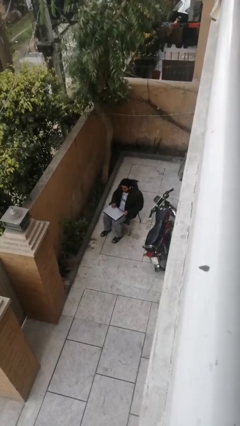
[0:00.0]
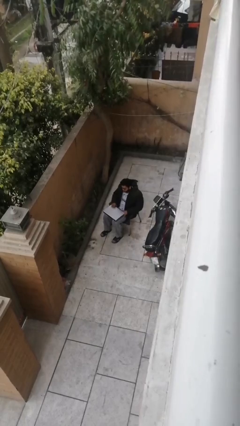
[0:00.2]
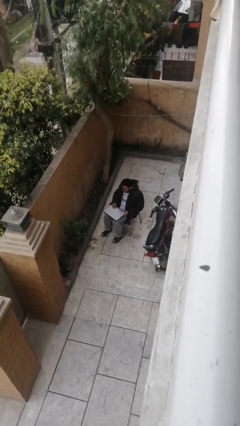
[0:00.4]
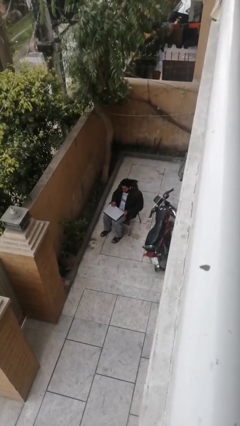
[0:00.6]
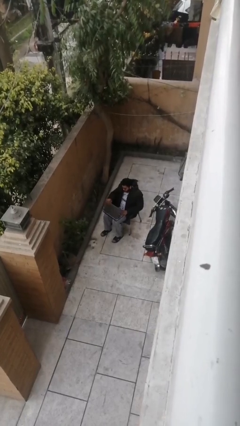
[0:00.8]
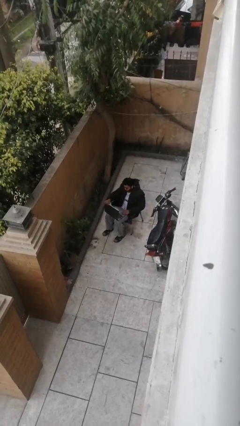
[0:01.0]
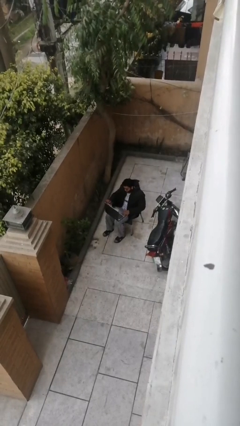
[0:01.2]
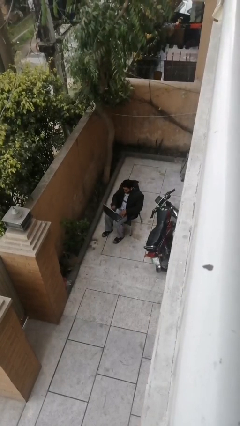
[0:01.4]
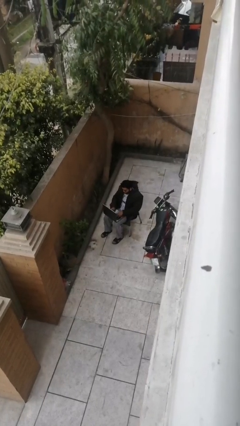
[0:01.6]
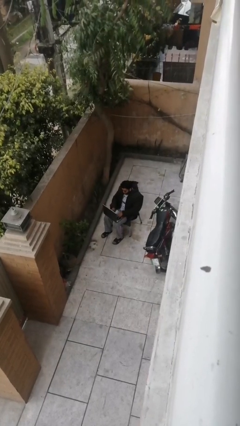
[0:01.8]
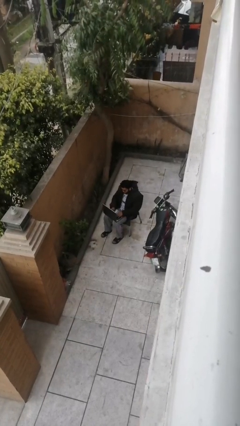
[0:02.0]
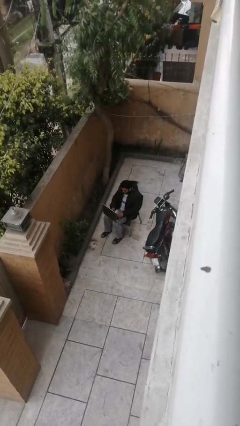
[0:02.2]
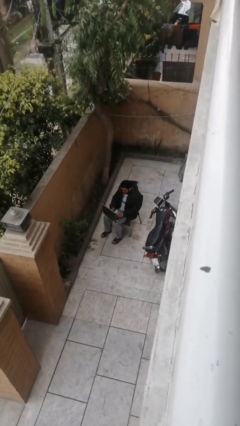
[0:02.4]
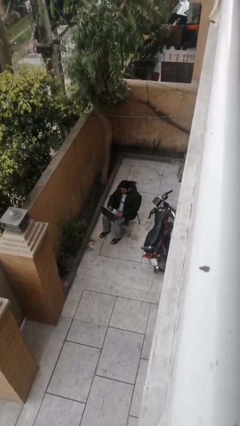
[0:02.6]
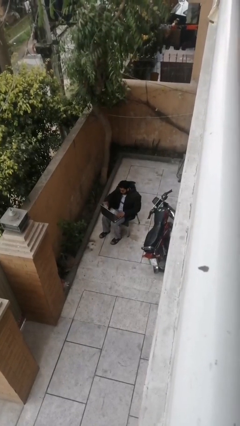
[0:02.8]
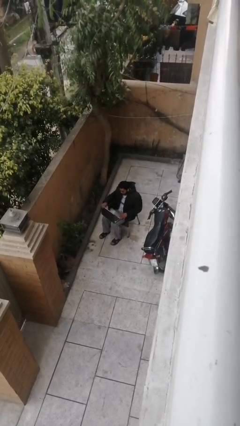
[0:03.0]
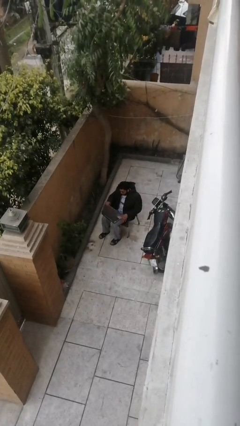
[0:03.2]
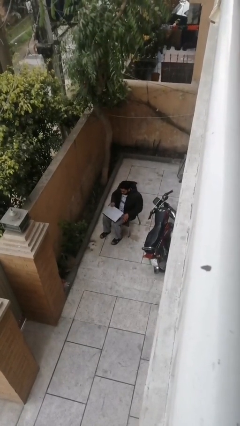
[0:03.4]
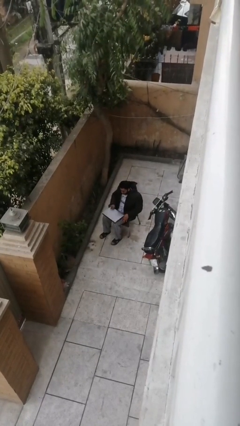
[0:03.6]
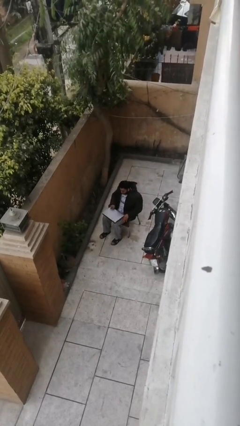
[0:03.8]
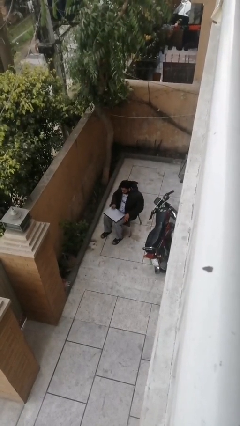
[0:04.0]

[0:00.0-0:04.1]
person interacts with laptop

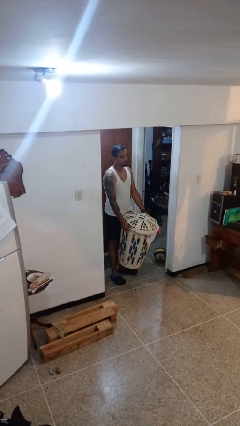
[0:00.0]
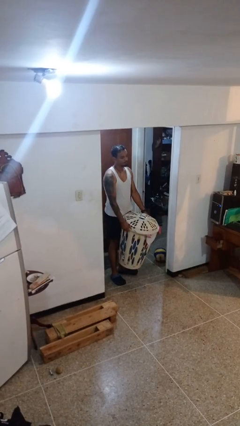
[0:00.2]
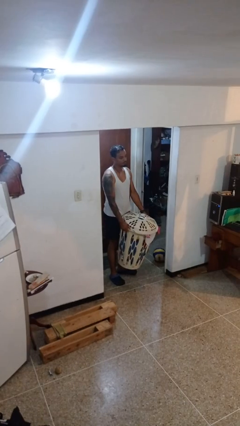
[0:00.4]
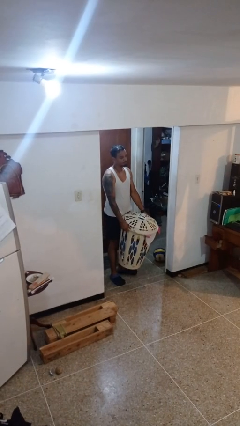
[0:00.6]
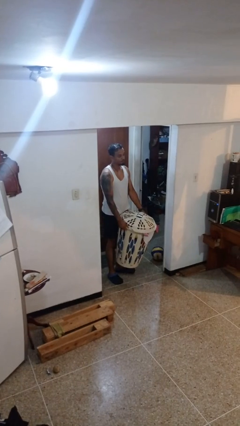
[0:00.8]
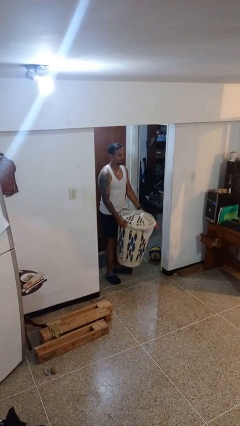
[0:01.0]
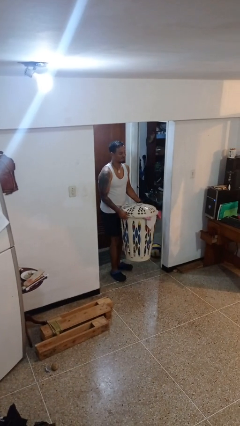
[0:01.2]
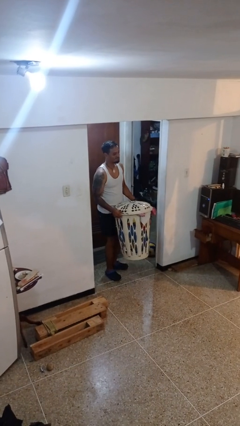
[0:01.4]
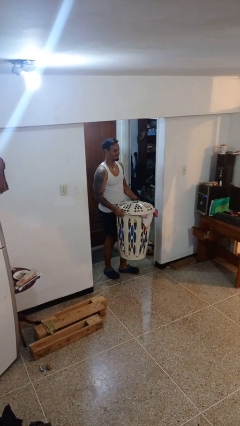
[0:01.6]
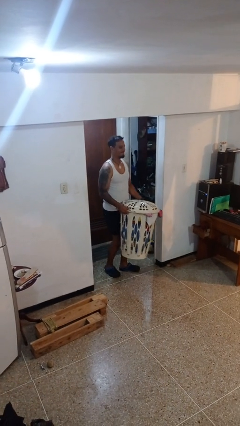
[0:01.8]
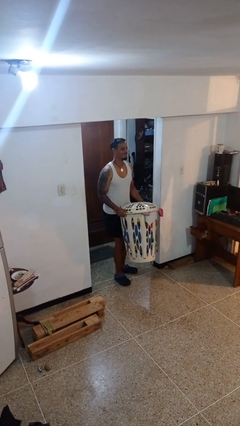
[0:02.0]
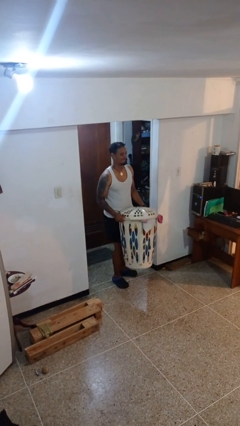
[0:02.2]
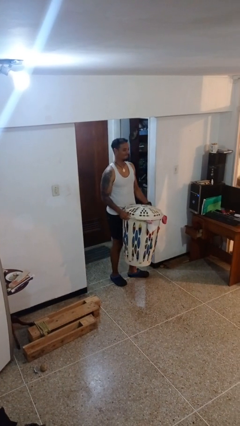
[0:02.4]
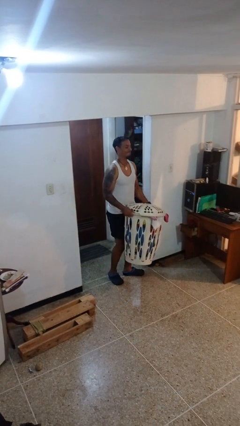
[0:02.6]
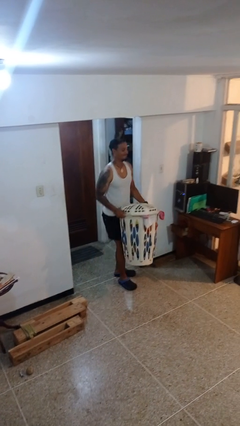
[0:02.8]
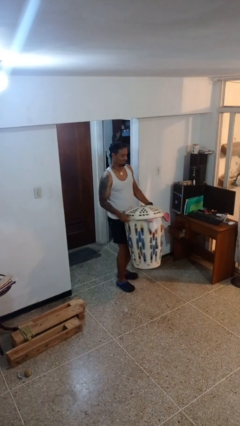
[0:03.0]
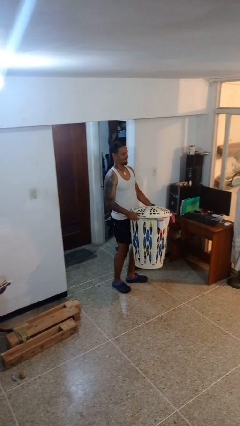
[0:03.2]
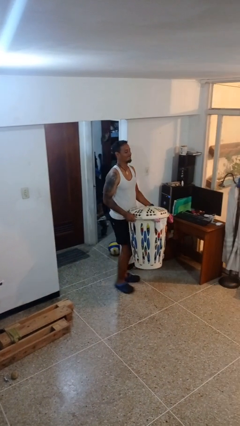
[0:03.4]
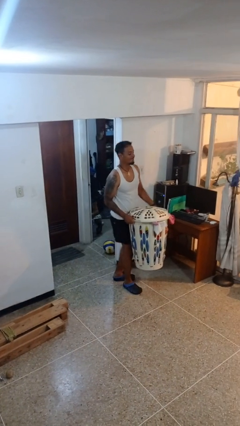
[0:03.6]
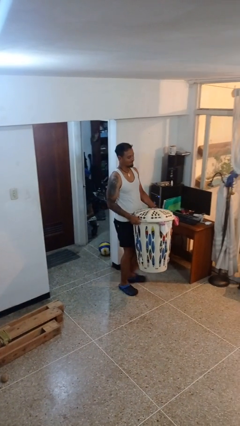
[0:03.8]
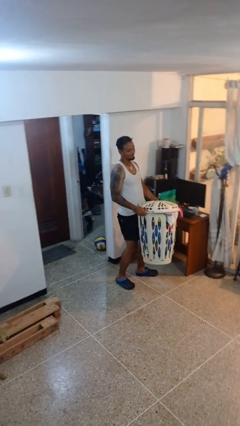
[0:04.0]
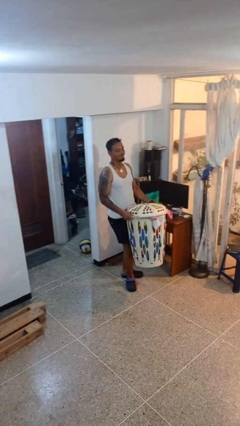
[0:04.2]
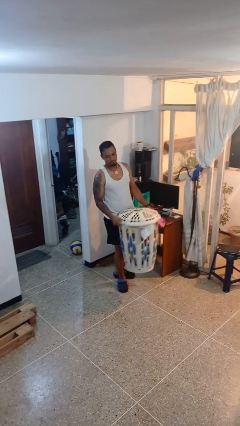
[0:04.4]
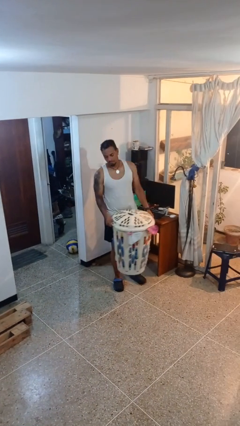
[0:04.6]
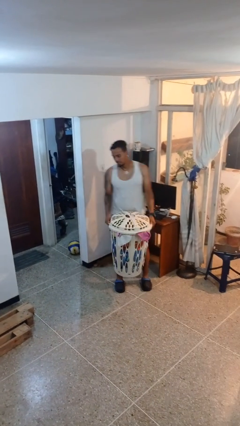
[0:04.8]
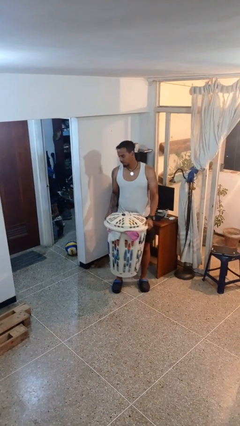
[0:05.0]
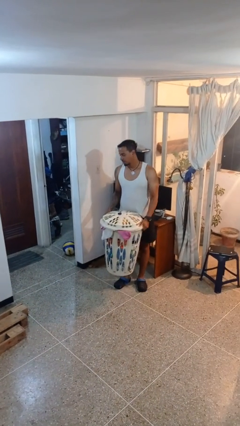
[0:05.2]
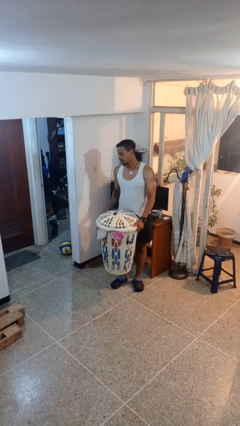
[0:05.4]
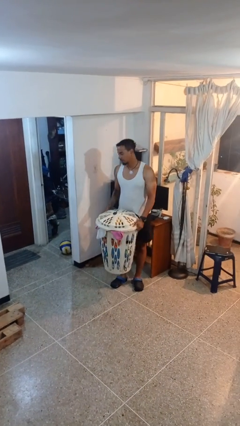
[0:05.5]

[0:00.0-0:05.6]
person carries laundry basket

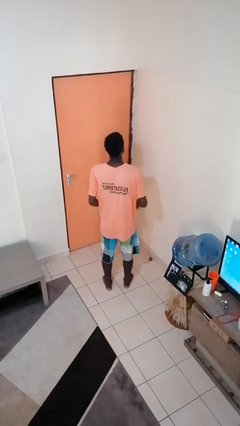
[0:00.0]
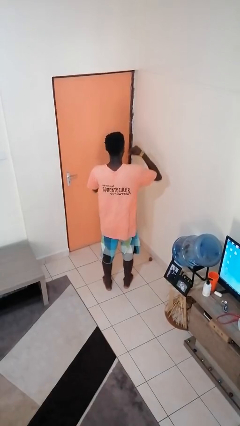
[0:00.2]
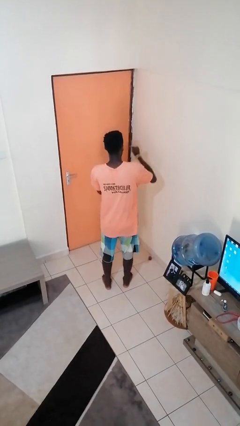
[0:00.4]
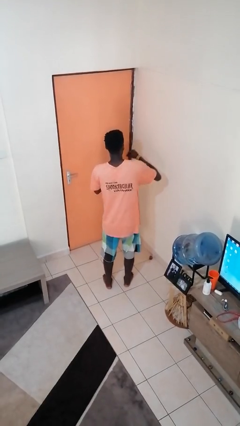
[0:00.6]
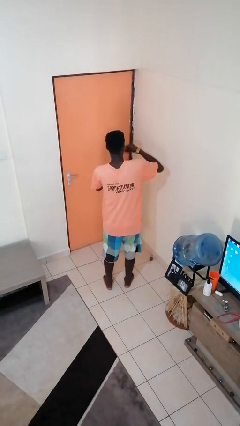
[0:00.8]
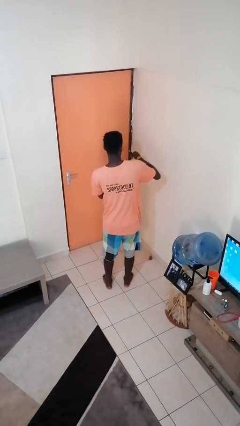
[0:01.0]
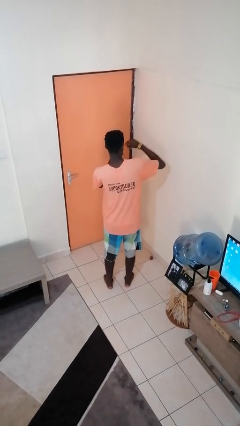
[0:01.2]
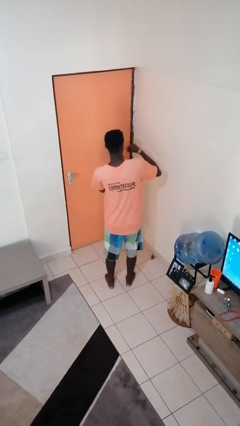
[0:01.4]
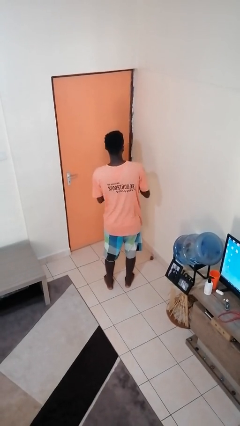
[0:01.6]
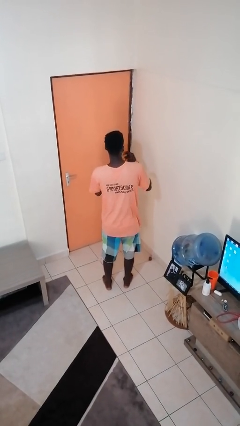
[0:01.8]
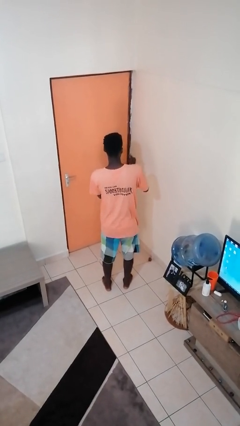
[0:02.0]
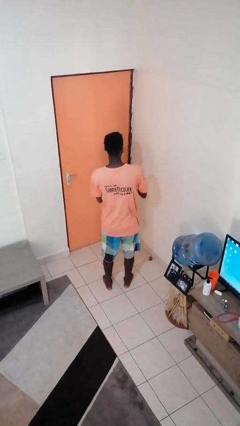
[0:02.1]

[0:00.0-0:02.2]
person snaps fingers

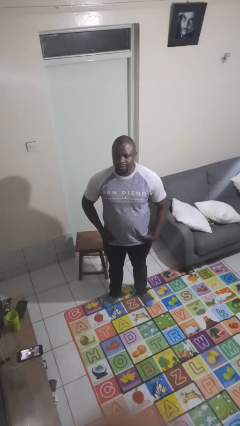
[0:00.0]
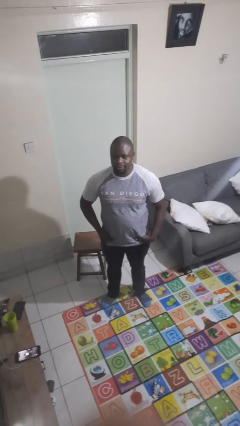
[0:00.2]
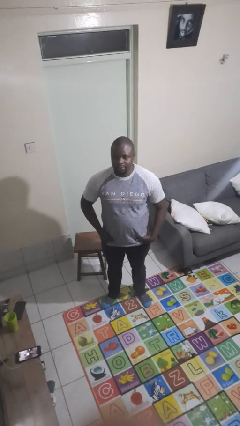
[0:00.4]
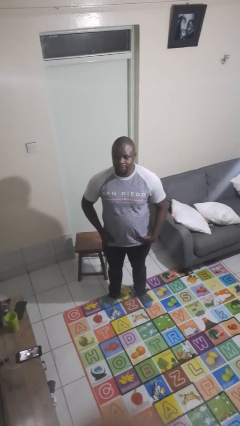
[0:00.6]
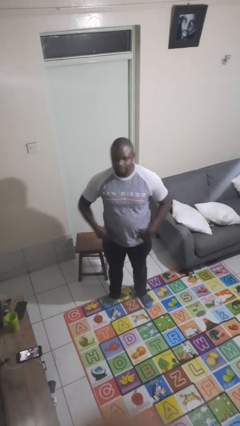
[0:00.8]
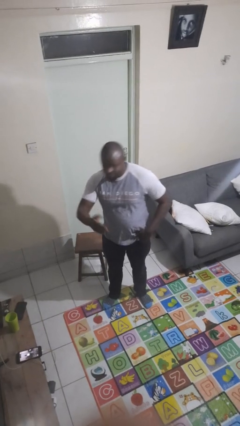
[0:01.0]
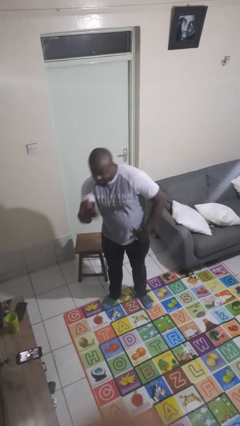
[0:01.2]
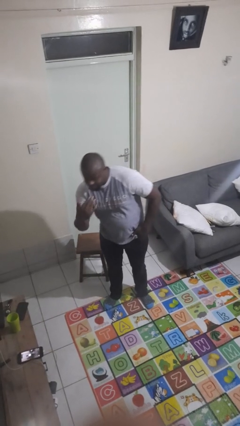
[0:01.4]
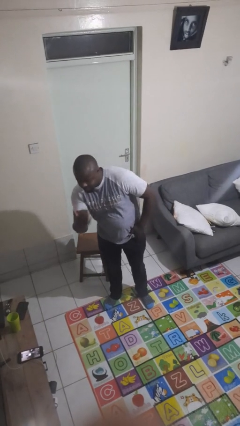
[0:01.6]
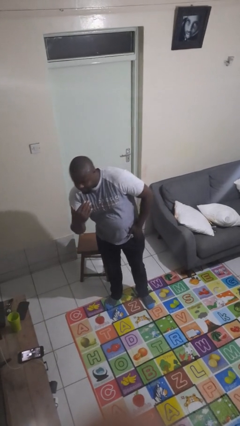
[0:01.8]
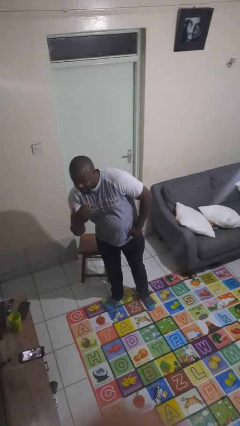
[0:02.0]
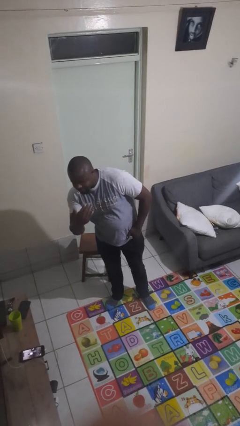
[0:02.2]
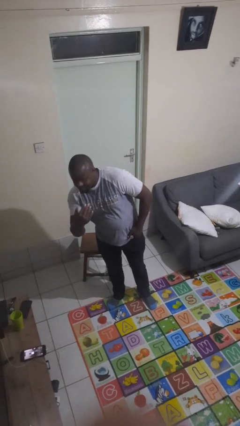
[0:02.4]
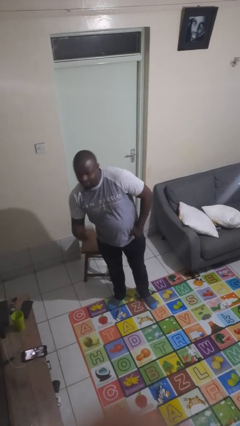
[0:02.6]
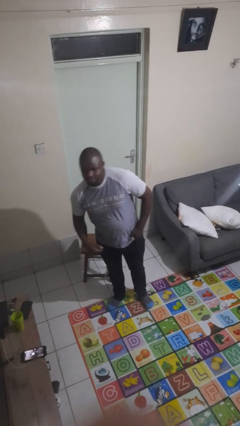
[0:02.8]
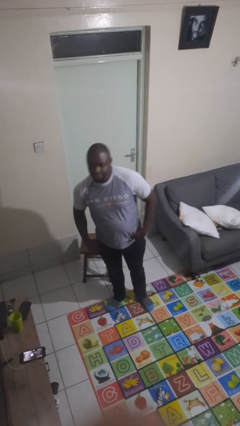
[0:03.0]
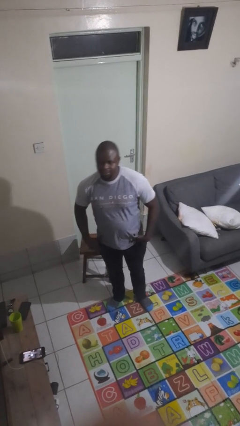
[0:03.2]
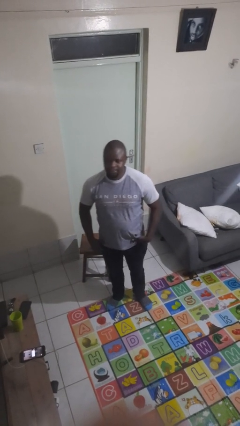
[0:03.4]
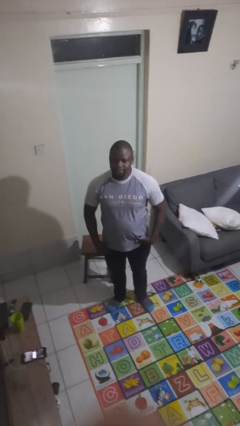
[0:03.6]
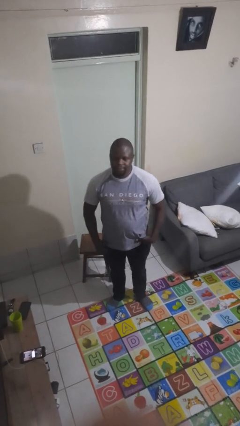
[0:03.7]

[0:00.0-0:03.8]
person gestures come here

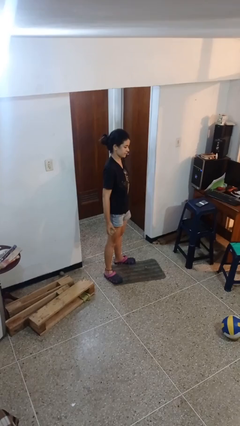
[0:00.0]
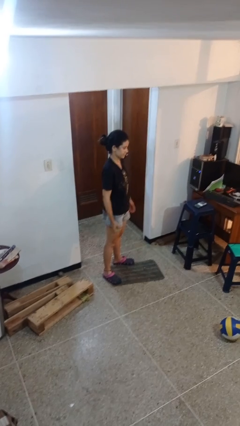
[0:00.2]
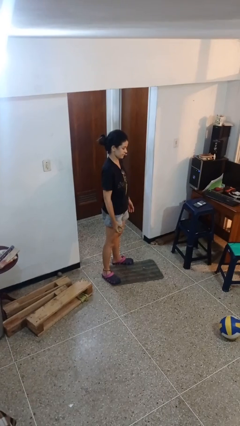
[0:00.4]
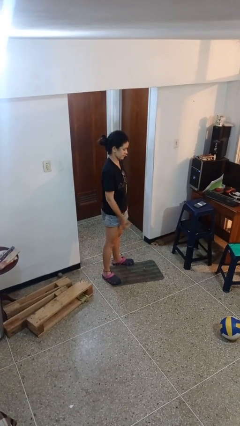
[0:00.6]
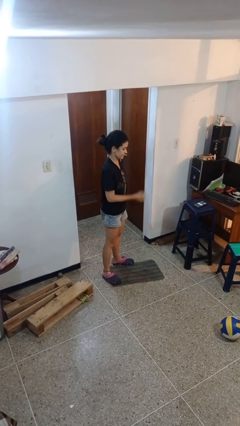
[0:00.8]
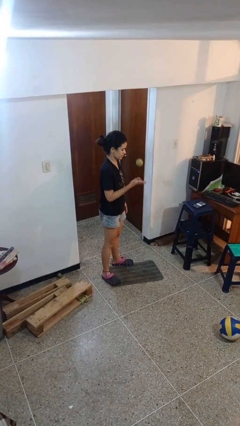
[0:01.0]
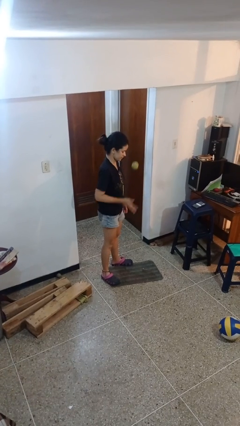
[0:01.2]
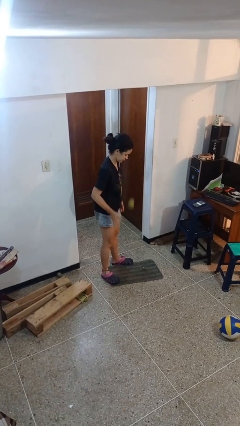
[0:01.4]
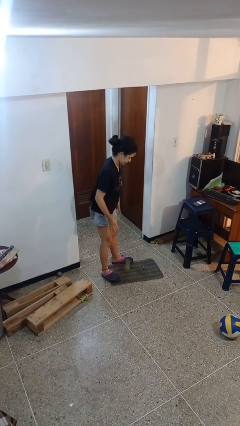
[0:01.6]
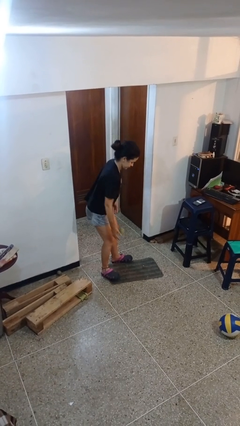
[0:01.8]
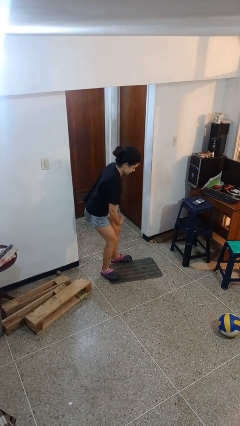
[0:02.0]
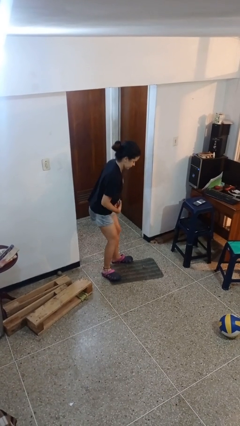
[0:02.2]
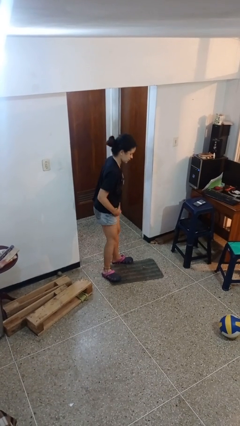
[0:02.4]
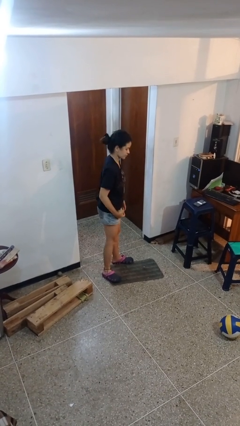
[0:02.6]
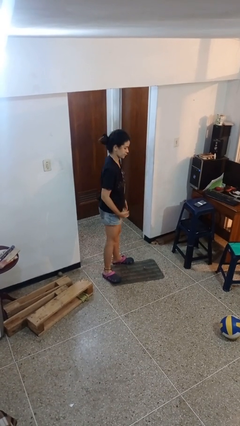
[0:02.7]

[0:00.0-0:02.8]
person bounces ball on floor
